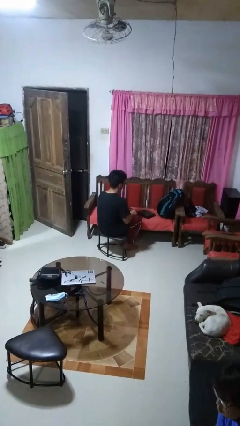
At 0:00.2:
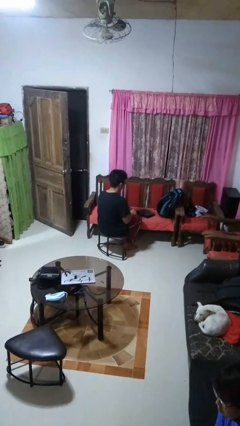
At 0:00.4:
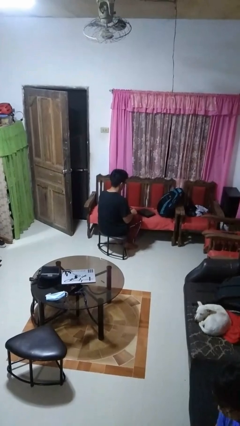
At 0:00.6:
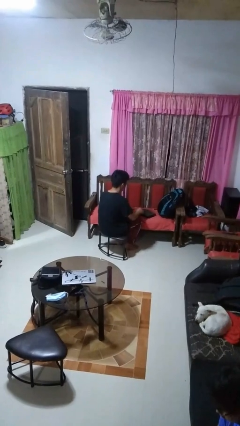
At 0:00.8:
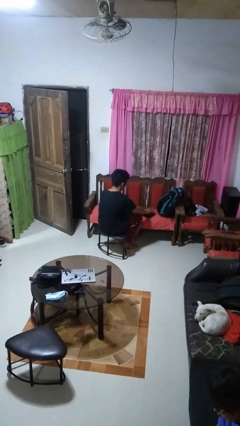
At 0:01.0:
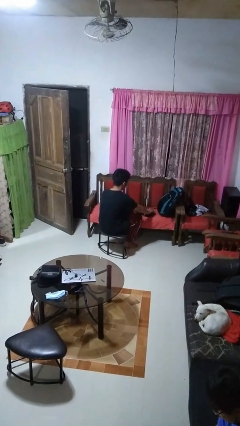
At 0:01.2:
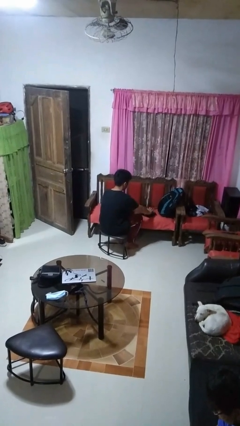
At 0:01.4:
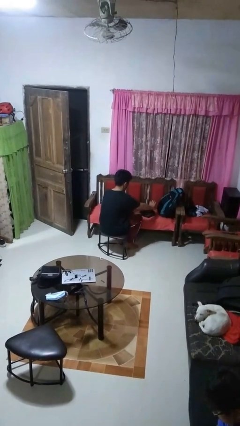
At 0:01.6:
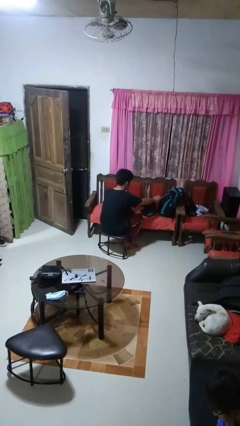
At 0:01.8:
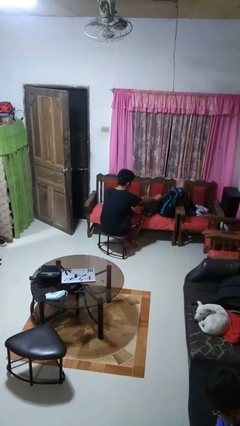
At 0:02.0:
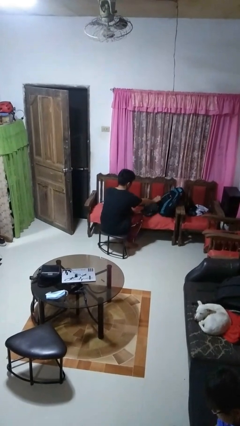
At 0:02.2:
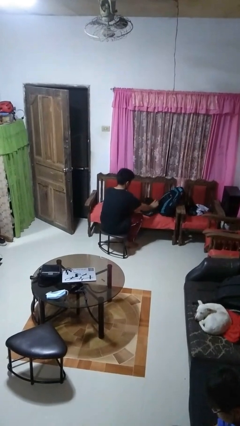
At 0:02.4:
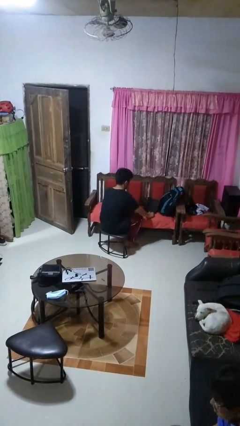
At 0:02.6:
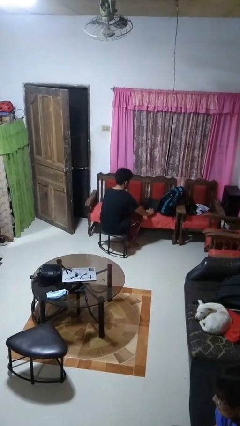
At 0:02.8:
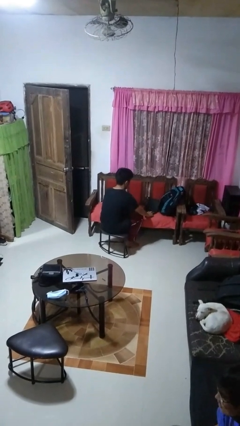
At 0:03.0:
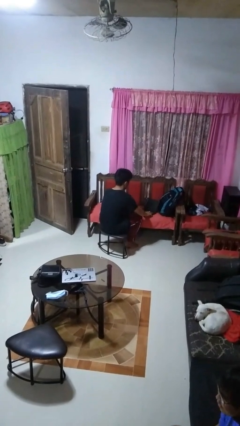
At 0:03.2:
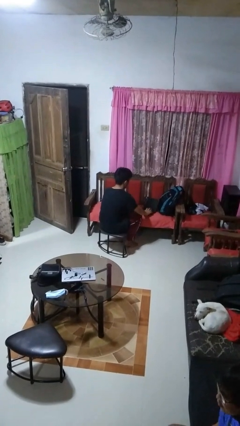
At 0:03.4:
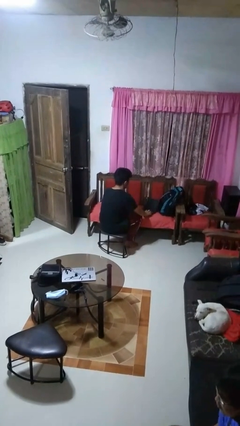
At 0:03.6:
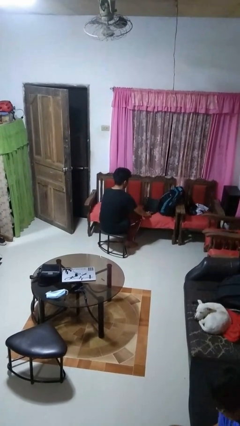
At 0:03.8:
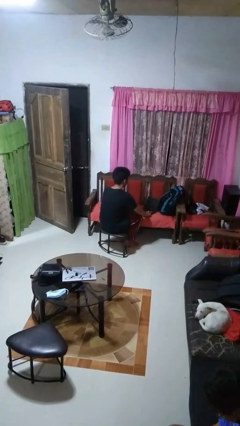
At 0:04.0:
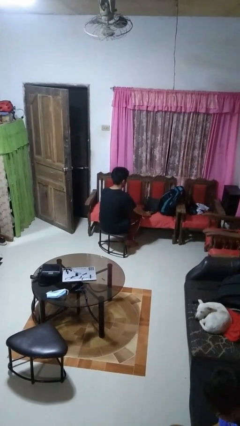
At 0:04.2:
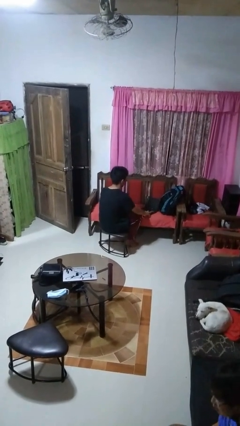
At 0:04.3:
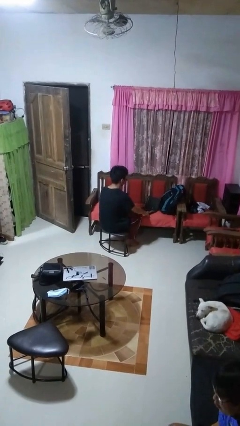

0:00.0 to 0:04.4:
person opens laptop

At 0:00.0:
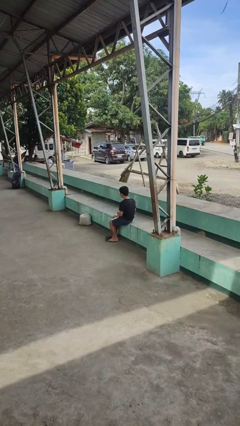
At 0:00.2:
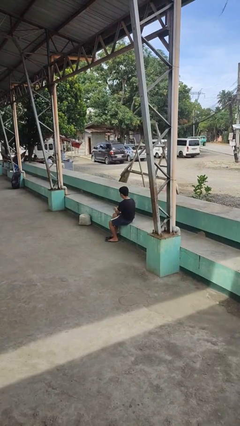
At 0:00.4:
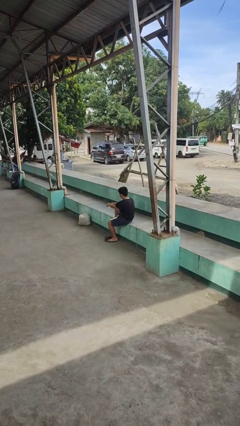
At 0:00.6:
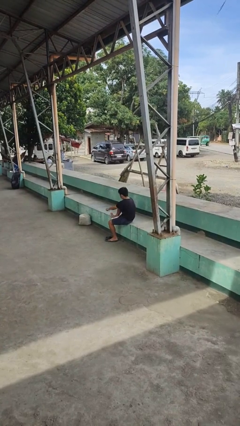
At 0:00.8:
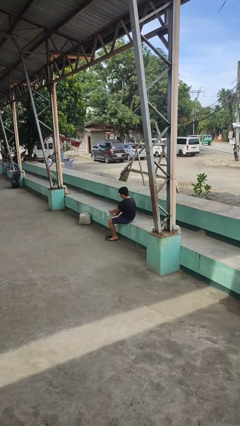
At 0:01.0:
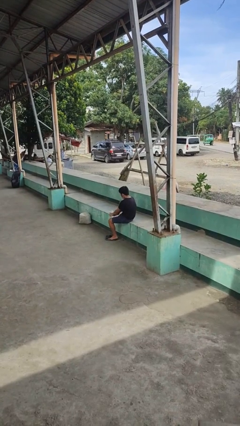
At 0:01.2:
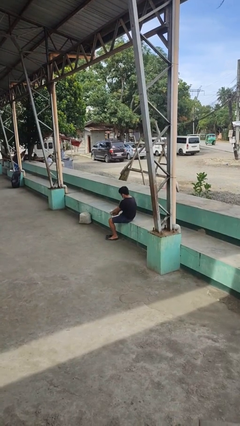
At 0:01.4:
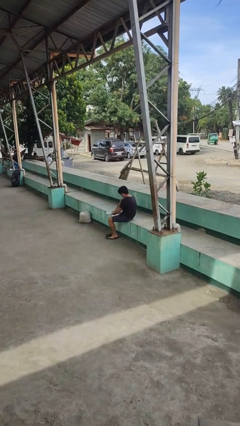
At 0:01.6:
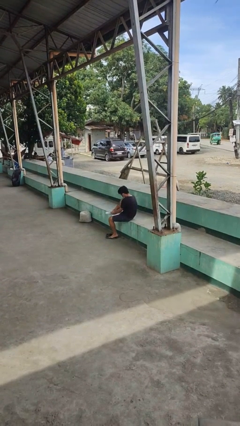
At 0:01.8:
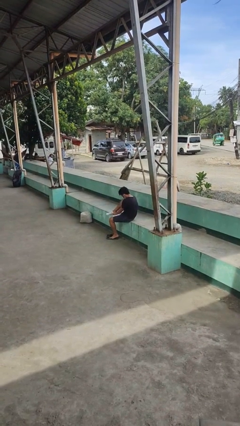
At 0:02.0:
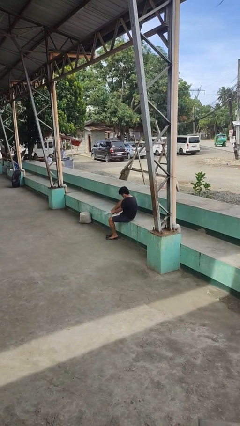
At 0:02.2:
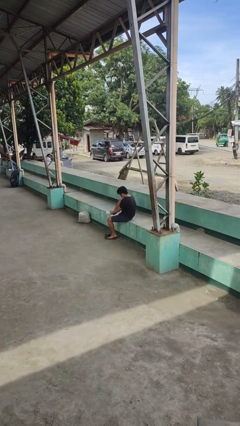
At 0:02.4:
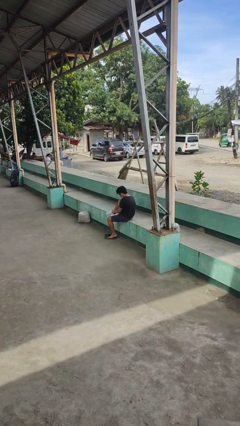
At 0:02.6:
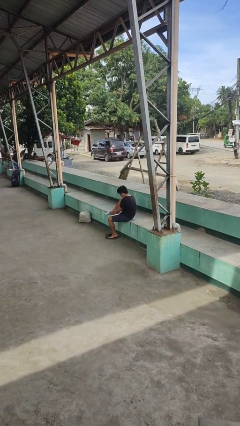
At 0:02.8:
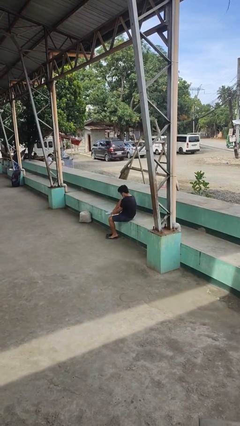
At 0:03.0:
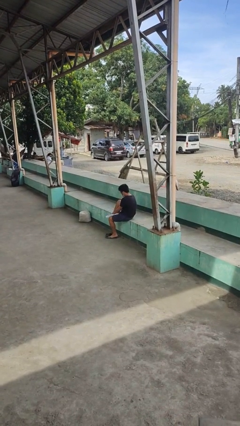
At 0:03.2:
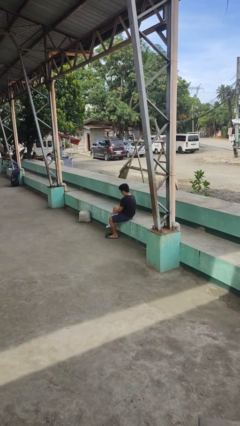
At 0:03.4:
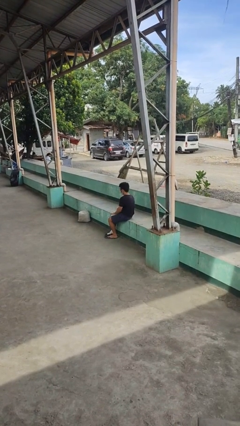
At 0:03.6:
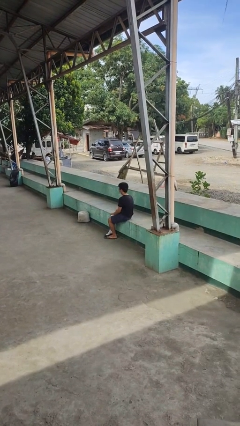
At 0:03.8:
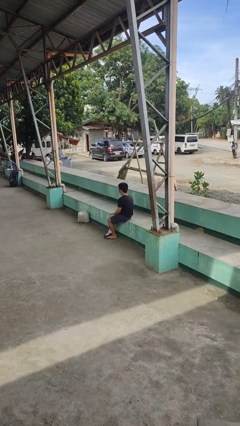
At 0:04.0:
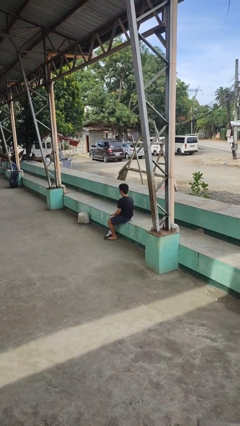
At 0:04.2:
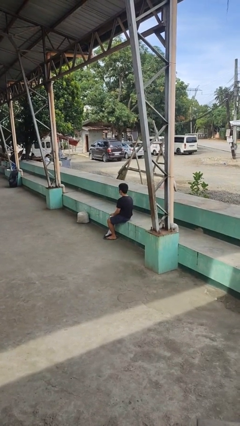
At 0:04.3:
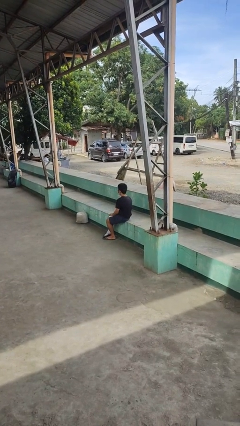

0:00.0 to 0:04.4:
person puts on socks

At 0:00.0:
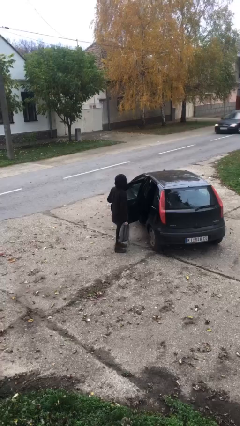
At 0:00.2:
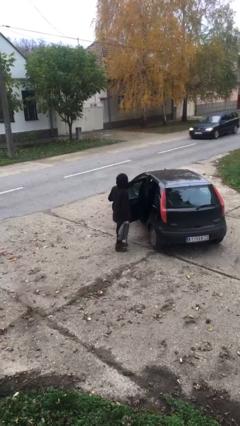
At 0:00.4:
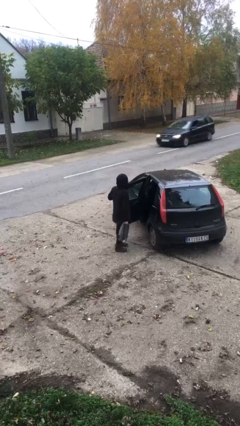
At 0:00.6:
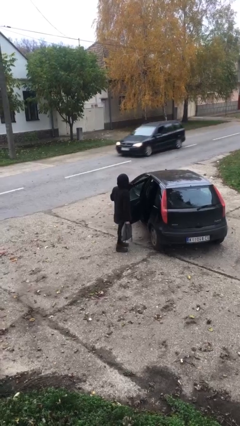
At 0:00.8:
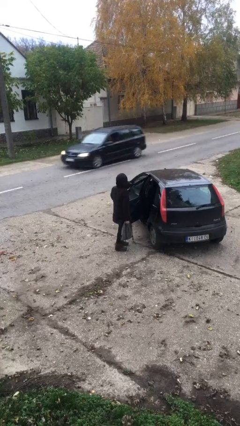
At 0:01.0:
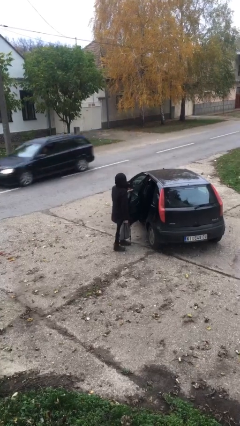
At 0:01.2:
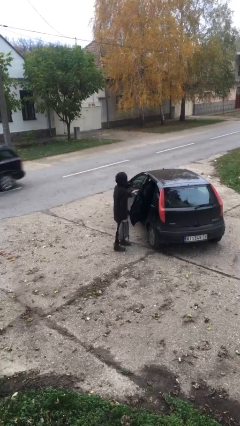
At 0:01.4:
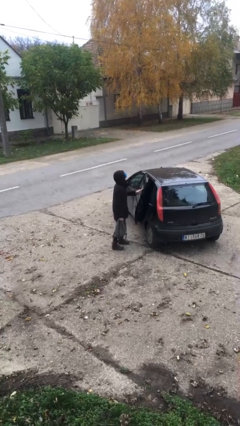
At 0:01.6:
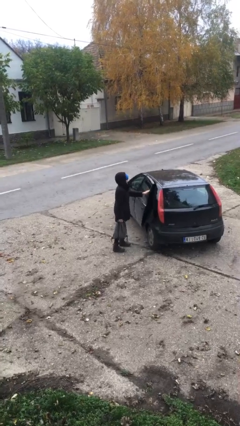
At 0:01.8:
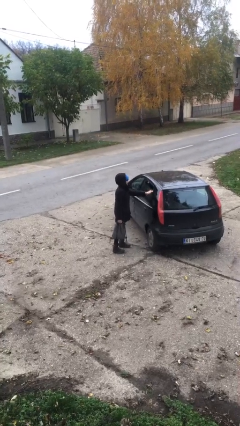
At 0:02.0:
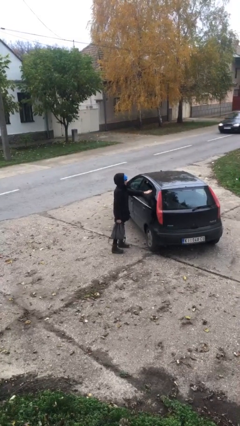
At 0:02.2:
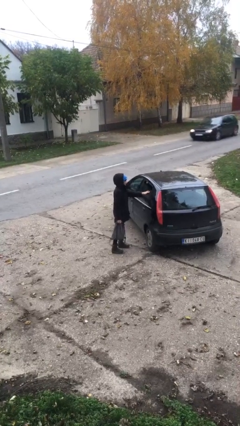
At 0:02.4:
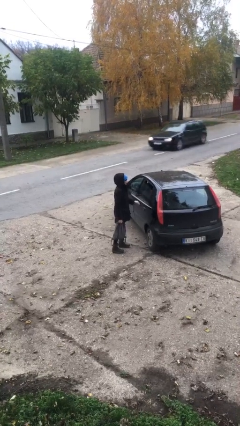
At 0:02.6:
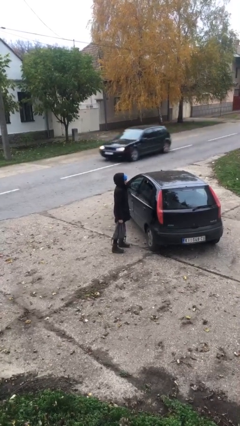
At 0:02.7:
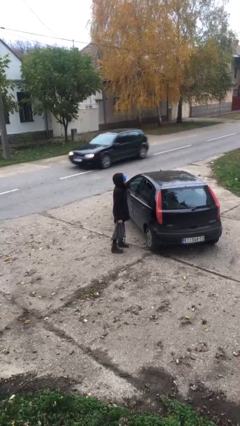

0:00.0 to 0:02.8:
person closes car door

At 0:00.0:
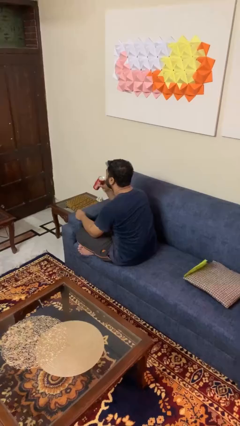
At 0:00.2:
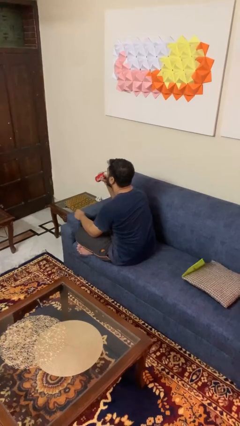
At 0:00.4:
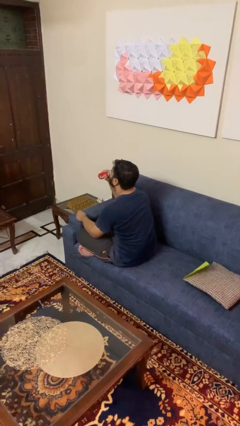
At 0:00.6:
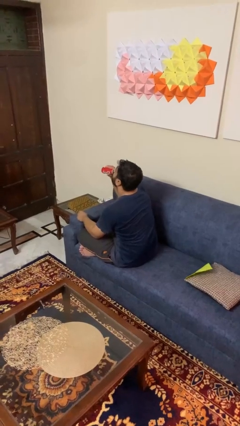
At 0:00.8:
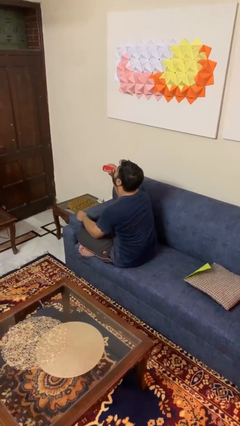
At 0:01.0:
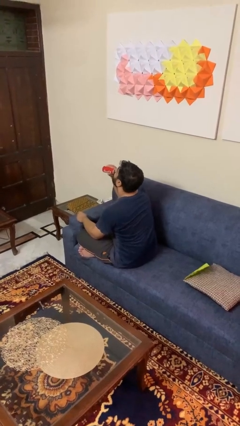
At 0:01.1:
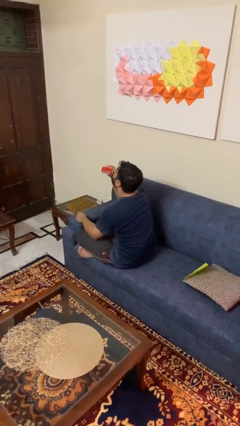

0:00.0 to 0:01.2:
person drinks from beverage can

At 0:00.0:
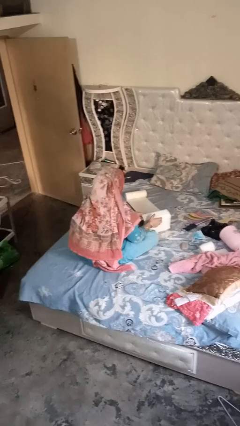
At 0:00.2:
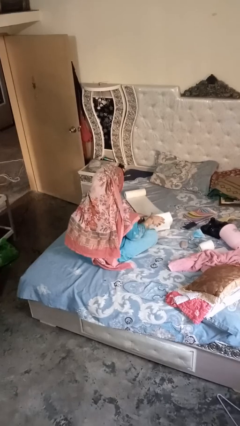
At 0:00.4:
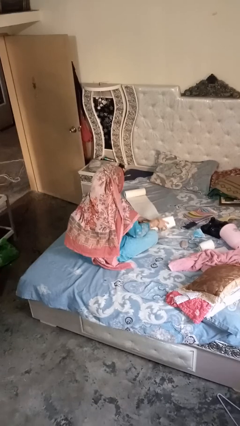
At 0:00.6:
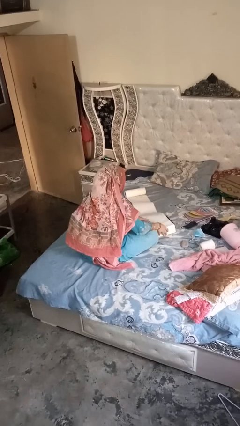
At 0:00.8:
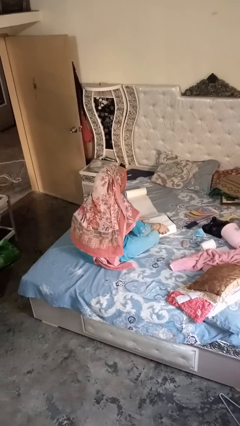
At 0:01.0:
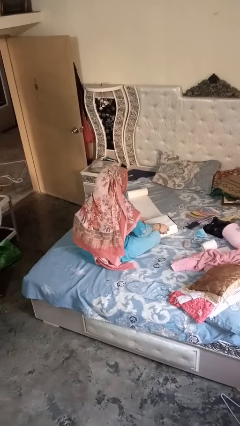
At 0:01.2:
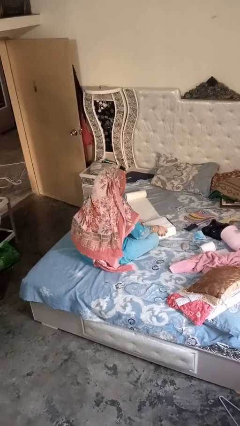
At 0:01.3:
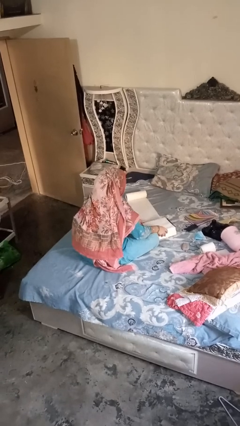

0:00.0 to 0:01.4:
person wraps box

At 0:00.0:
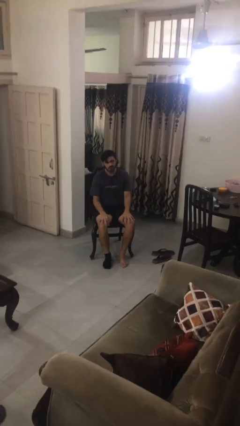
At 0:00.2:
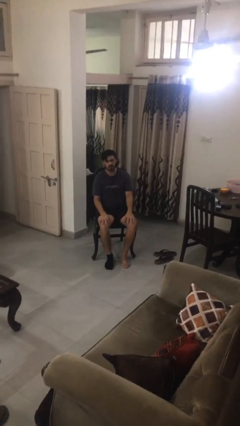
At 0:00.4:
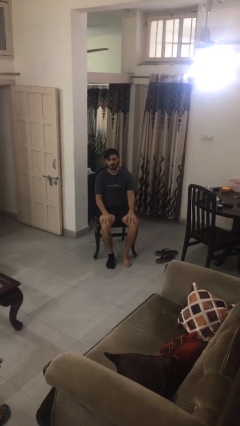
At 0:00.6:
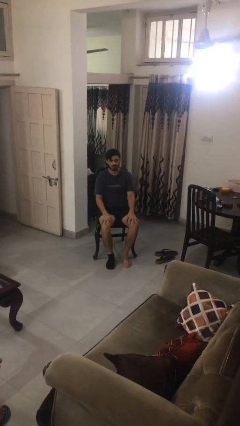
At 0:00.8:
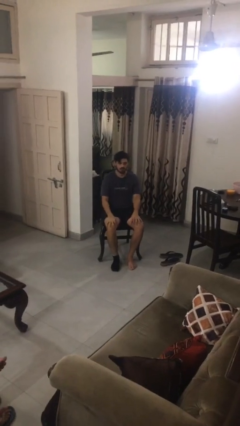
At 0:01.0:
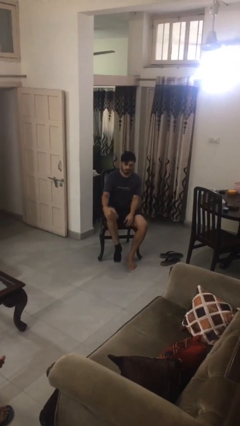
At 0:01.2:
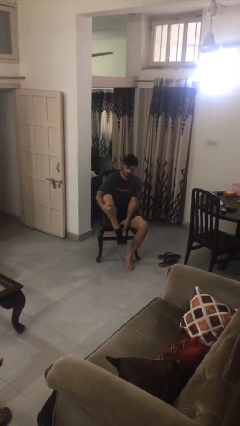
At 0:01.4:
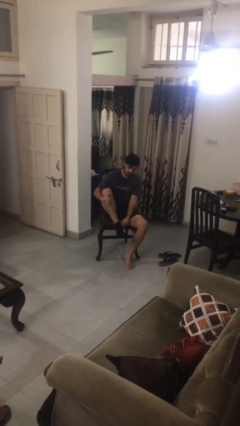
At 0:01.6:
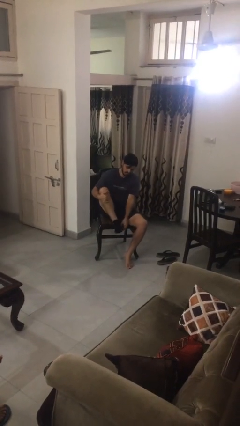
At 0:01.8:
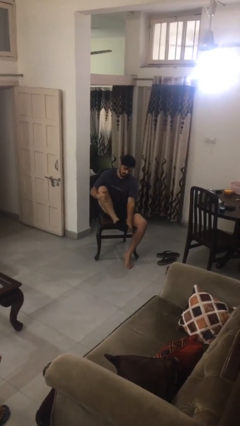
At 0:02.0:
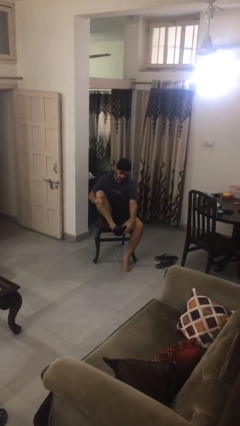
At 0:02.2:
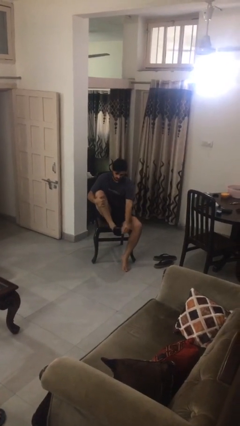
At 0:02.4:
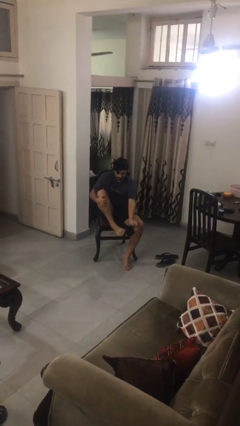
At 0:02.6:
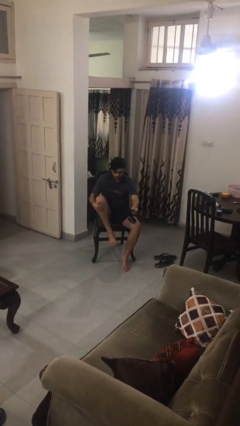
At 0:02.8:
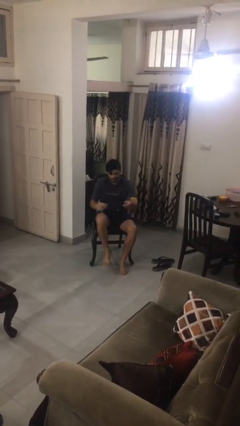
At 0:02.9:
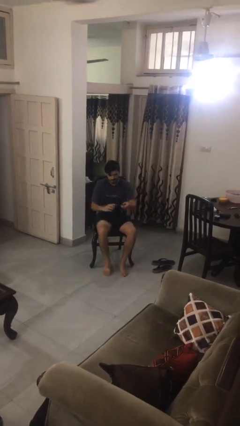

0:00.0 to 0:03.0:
person takes off socks
